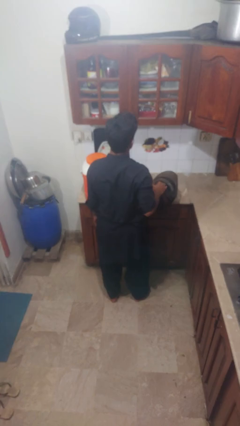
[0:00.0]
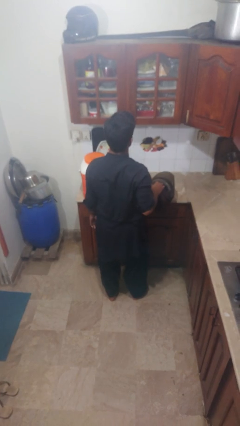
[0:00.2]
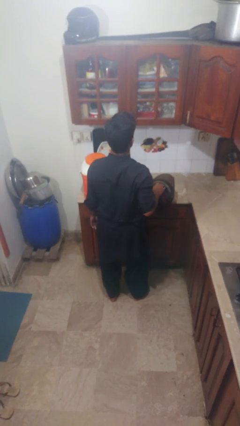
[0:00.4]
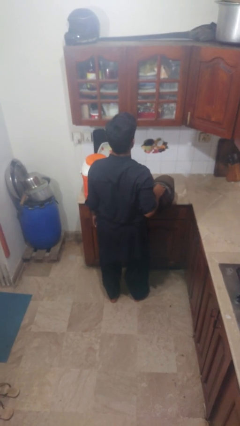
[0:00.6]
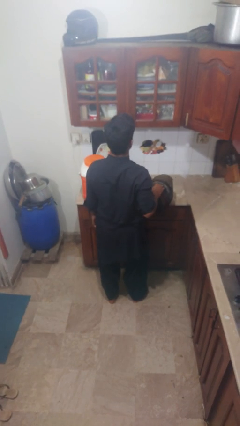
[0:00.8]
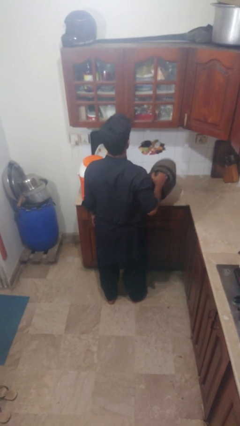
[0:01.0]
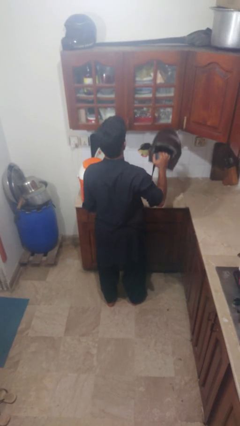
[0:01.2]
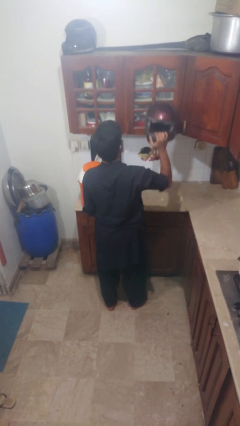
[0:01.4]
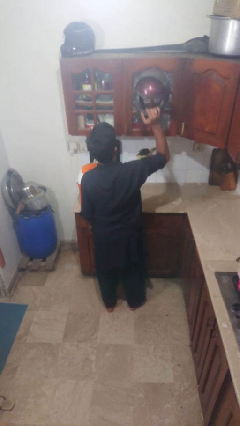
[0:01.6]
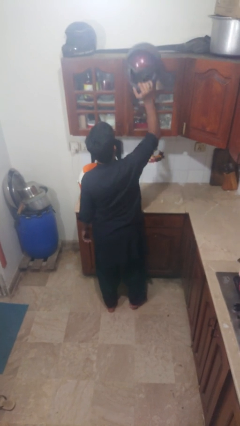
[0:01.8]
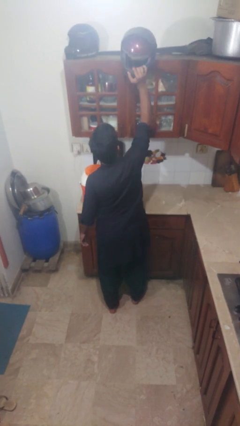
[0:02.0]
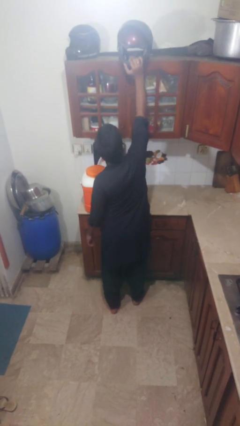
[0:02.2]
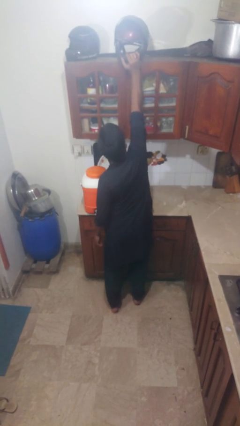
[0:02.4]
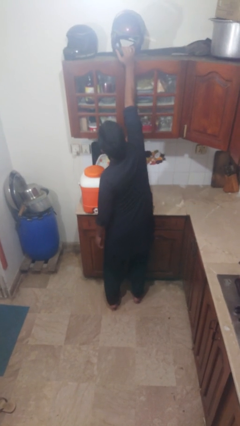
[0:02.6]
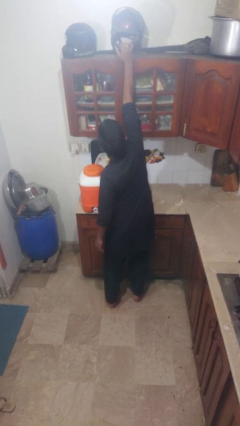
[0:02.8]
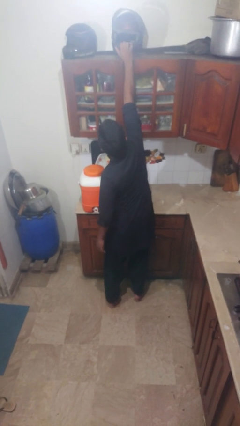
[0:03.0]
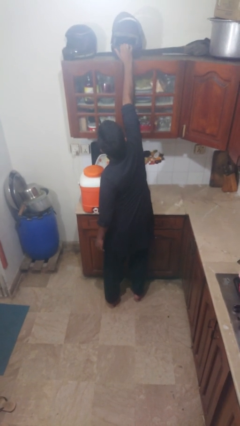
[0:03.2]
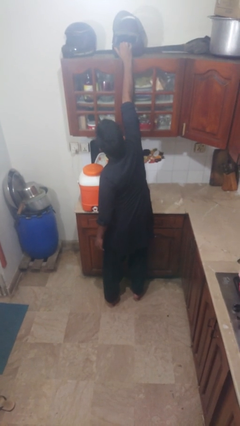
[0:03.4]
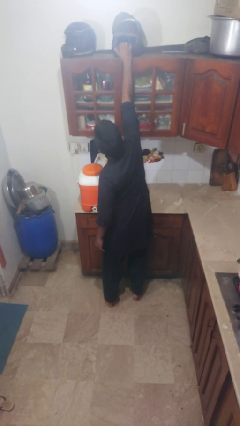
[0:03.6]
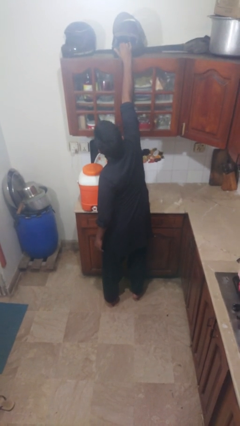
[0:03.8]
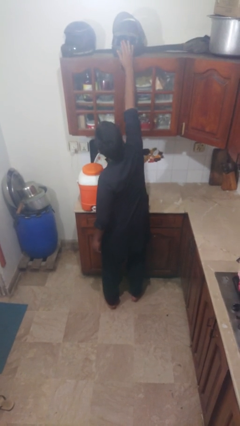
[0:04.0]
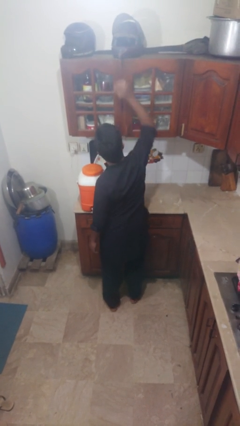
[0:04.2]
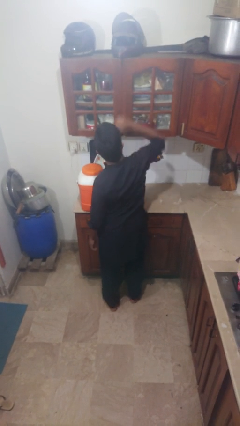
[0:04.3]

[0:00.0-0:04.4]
person puts down object on shelf

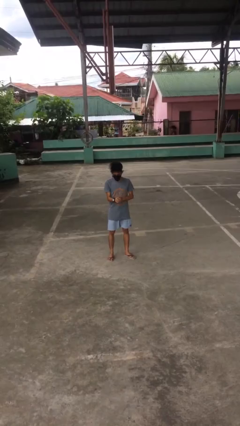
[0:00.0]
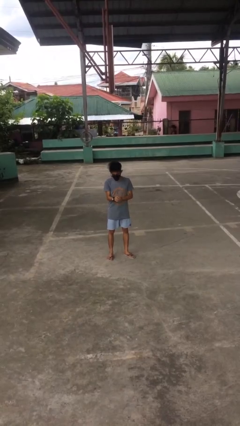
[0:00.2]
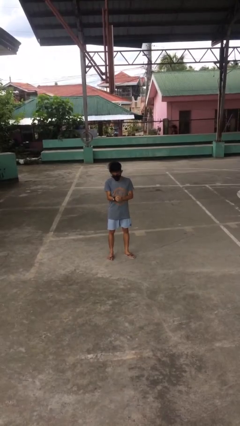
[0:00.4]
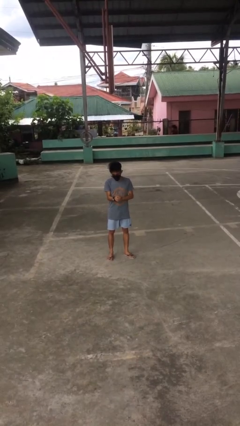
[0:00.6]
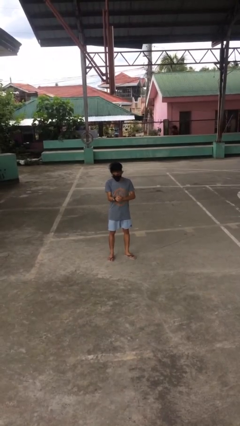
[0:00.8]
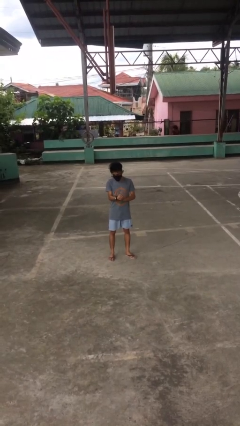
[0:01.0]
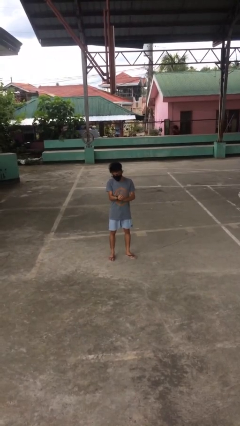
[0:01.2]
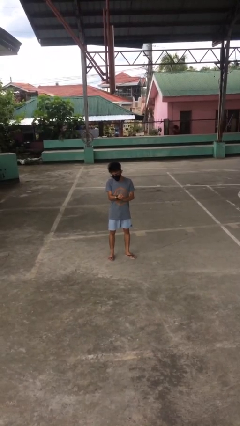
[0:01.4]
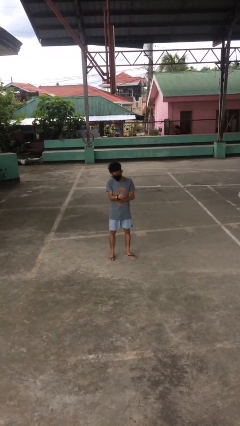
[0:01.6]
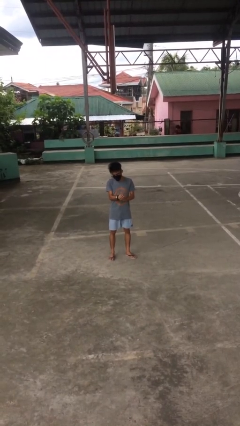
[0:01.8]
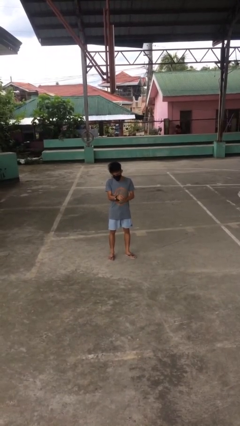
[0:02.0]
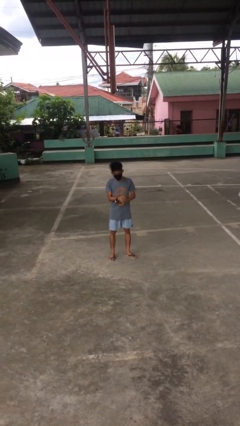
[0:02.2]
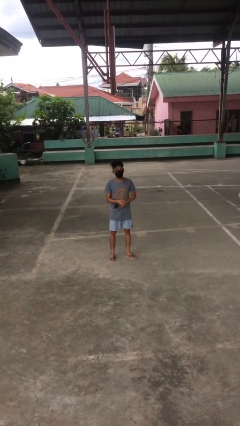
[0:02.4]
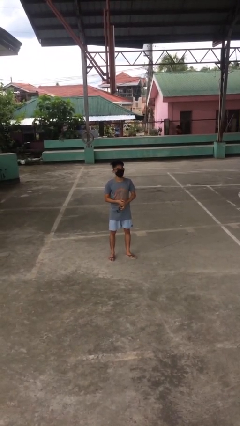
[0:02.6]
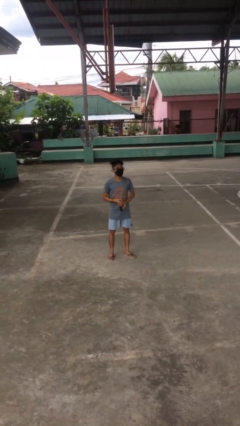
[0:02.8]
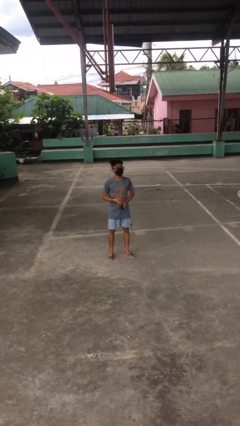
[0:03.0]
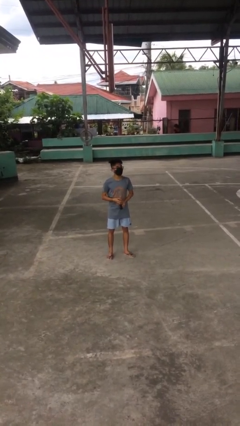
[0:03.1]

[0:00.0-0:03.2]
person takes off wristwatch

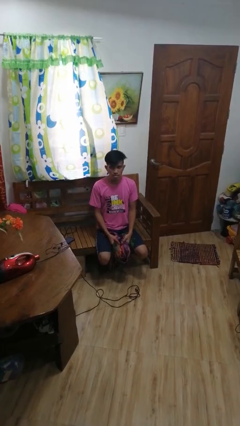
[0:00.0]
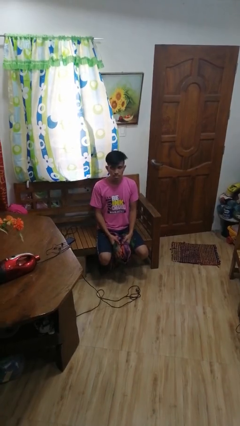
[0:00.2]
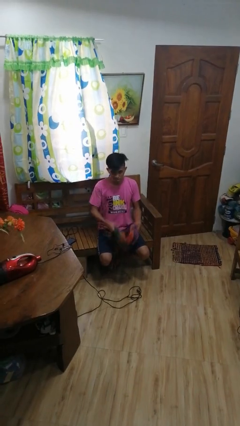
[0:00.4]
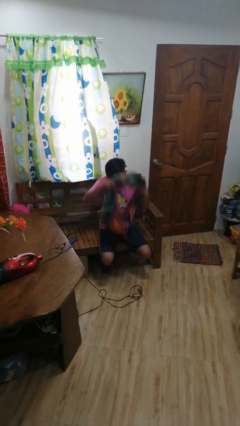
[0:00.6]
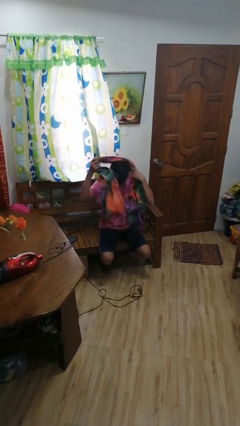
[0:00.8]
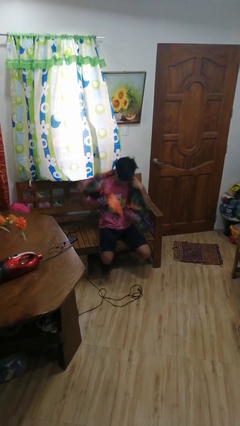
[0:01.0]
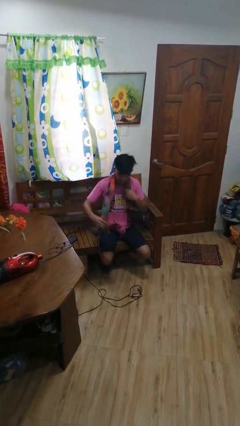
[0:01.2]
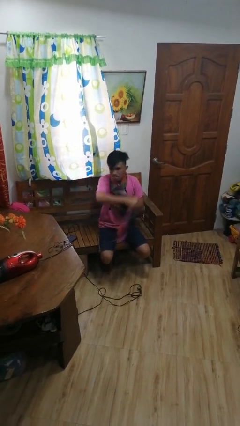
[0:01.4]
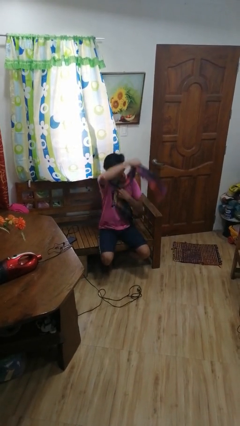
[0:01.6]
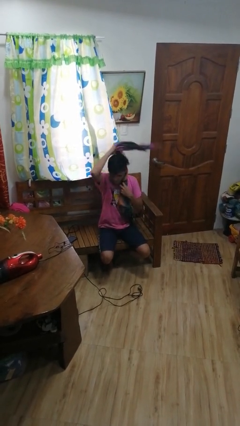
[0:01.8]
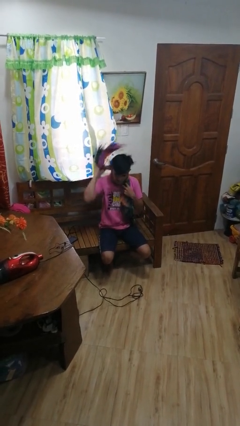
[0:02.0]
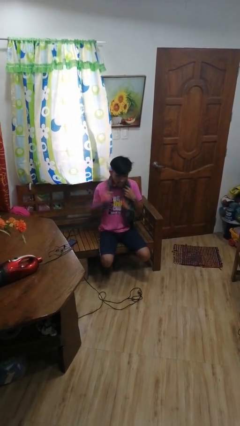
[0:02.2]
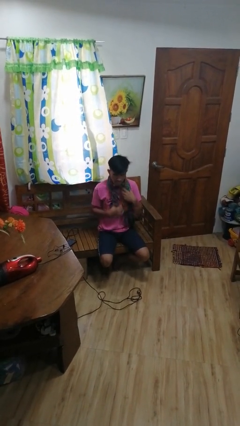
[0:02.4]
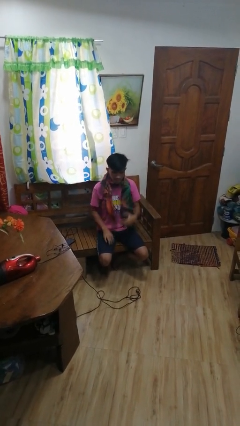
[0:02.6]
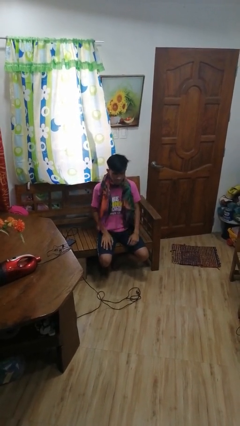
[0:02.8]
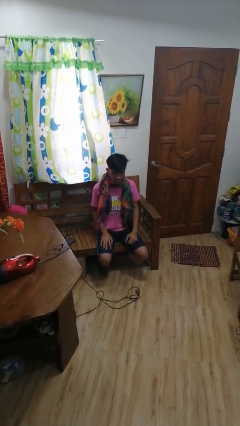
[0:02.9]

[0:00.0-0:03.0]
person puts on scarf

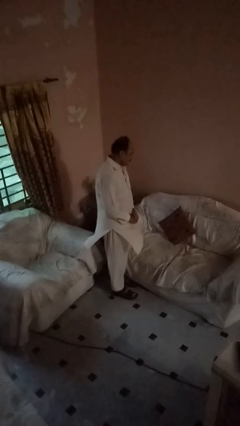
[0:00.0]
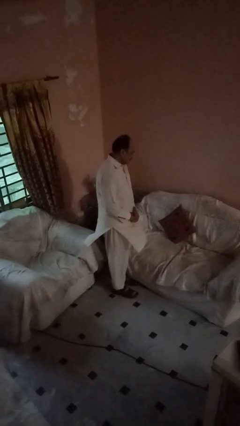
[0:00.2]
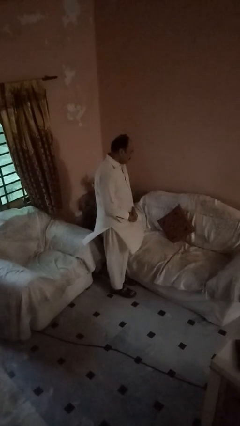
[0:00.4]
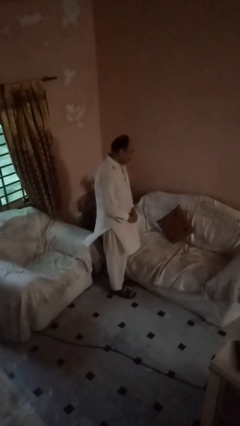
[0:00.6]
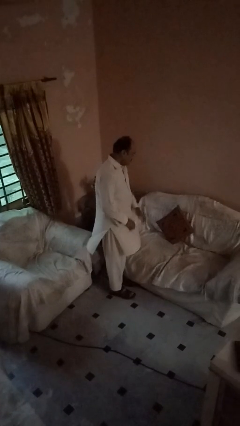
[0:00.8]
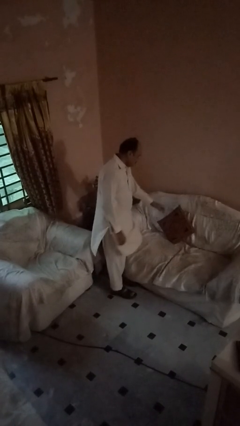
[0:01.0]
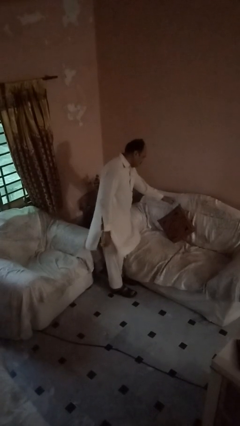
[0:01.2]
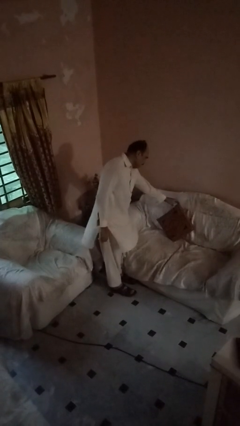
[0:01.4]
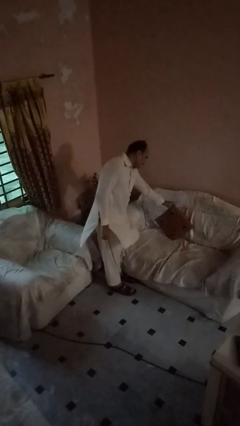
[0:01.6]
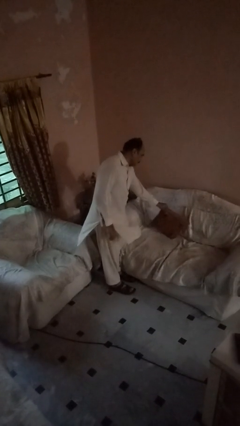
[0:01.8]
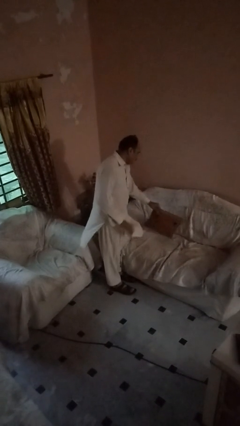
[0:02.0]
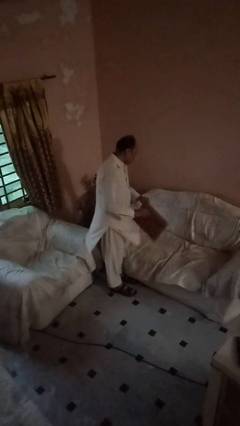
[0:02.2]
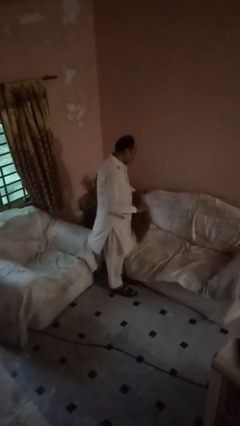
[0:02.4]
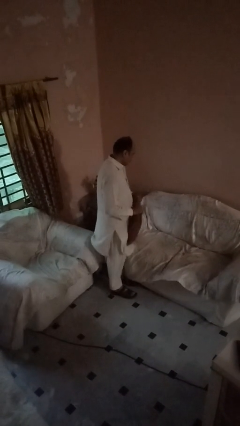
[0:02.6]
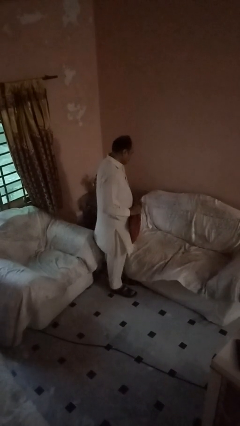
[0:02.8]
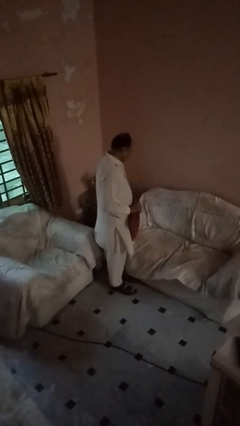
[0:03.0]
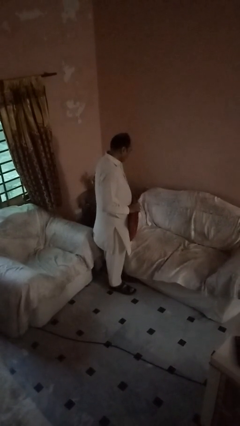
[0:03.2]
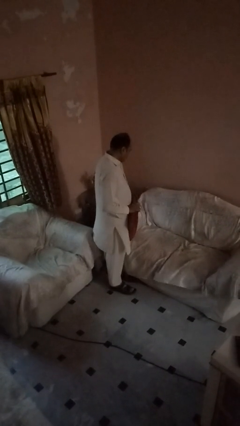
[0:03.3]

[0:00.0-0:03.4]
person picks up object from couch

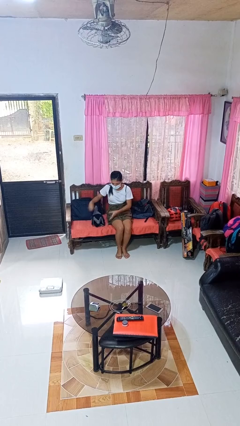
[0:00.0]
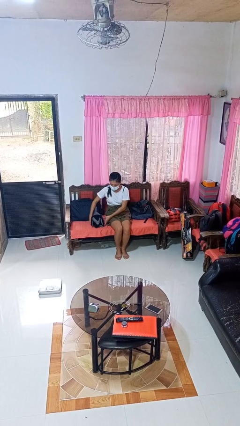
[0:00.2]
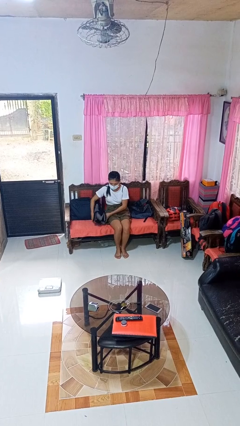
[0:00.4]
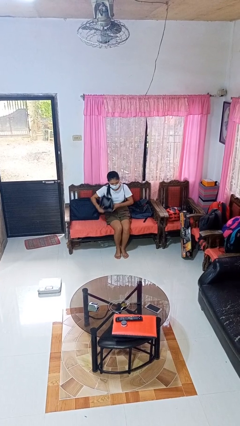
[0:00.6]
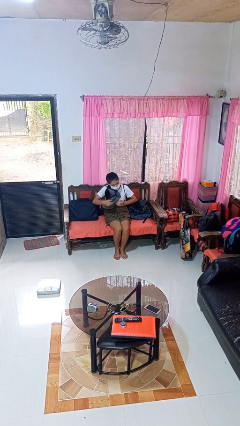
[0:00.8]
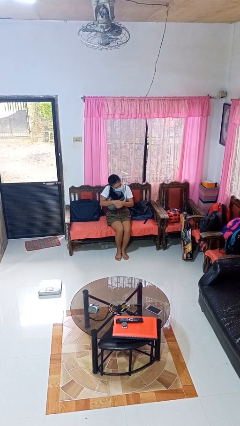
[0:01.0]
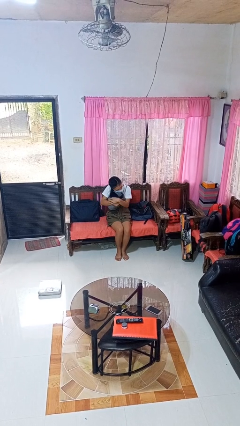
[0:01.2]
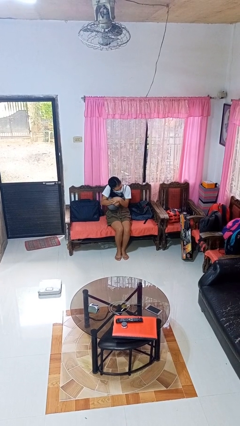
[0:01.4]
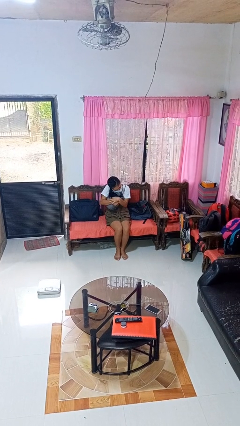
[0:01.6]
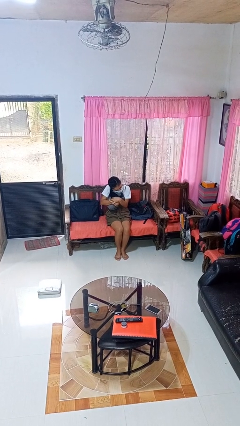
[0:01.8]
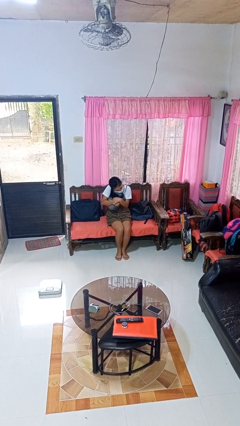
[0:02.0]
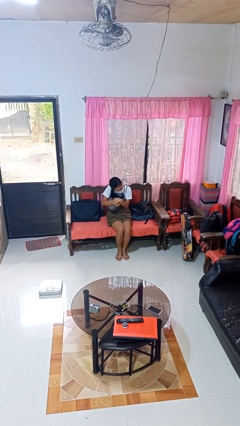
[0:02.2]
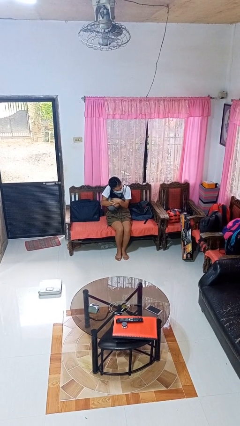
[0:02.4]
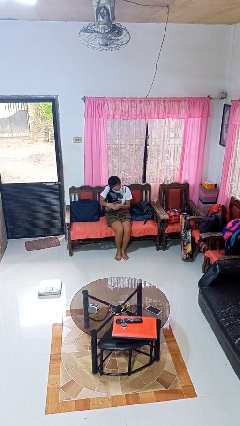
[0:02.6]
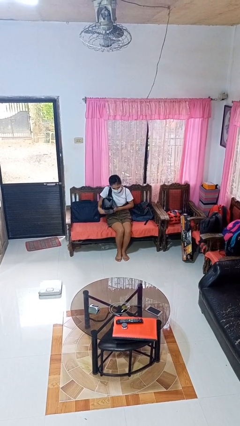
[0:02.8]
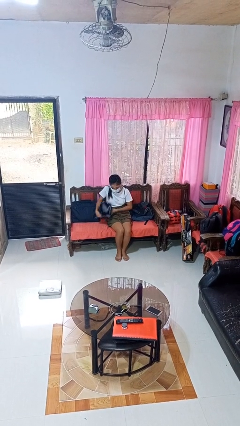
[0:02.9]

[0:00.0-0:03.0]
person hugs stuffed animal

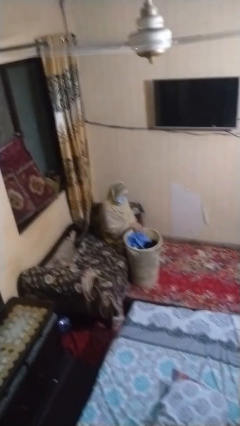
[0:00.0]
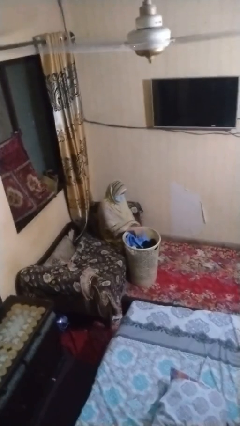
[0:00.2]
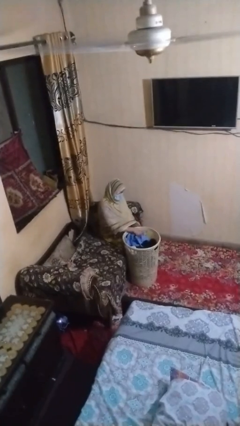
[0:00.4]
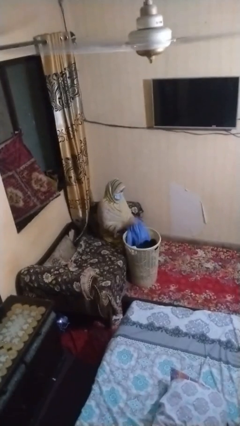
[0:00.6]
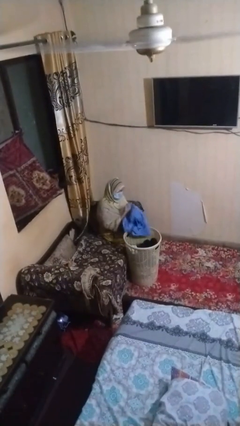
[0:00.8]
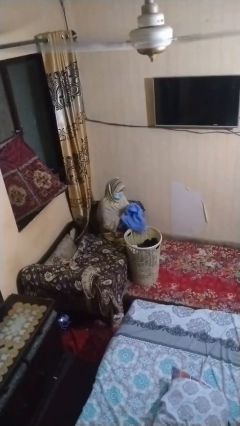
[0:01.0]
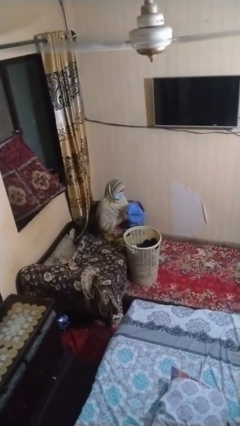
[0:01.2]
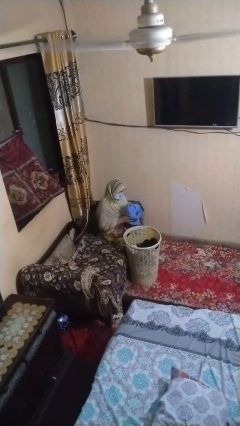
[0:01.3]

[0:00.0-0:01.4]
person takes object from basket
